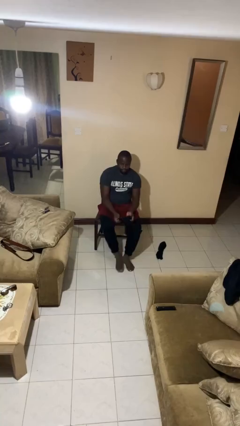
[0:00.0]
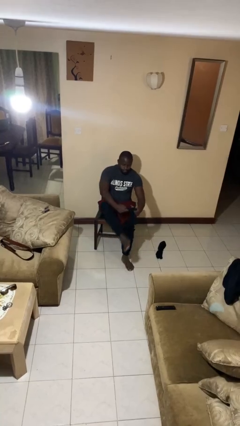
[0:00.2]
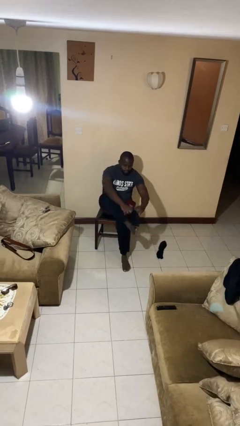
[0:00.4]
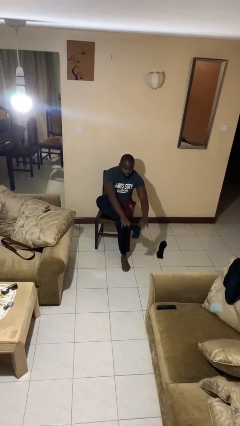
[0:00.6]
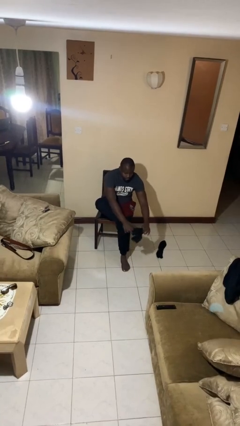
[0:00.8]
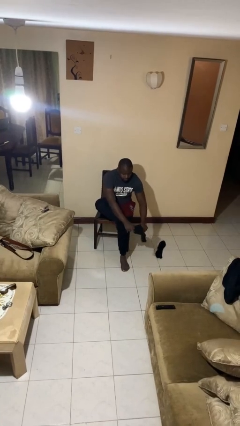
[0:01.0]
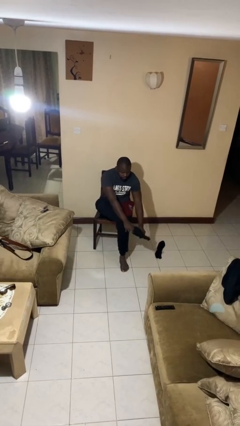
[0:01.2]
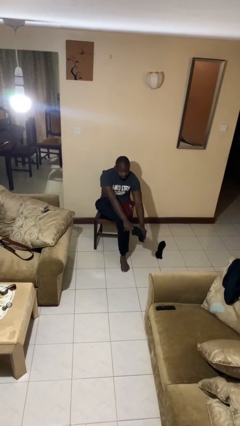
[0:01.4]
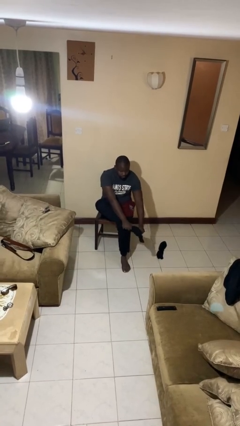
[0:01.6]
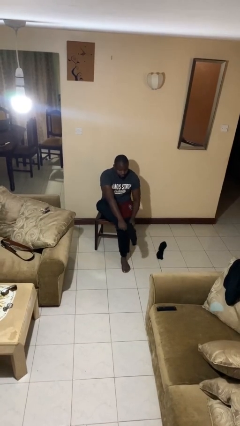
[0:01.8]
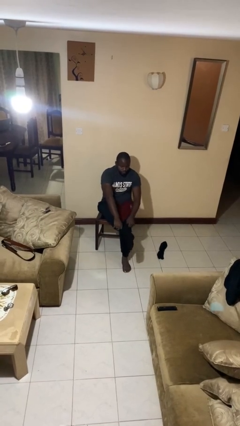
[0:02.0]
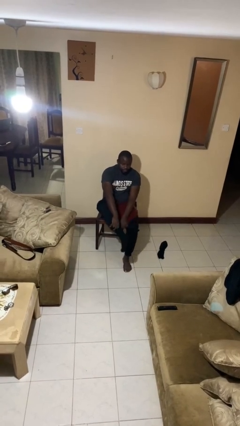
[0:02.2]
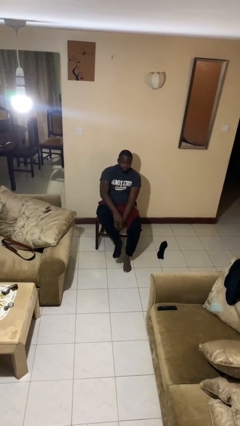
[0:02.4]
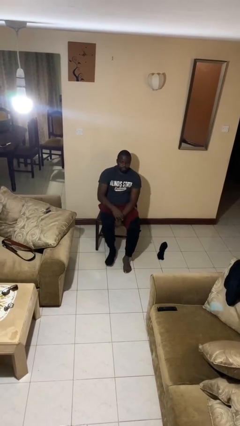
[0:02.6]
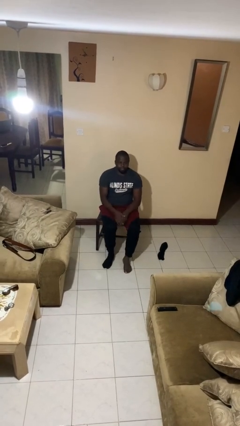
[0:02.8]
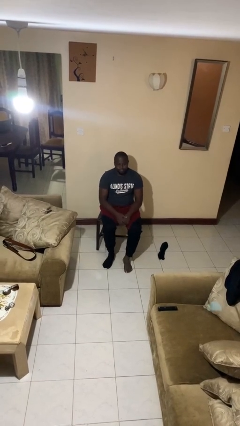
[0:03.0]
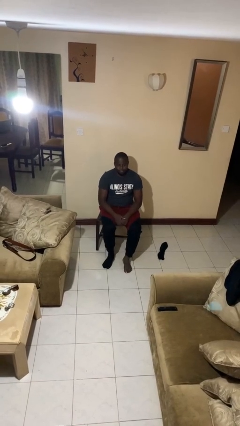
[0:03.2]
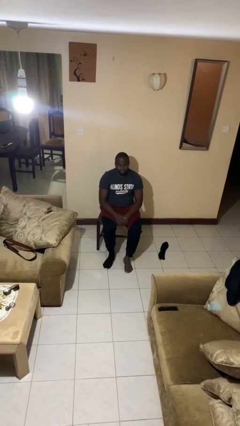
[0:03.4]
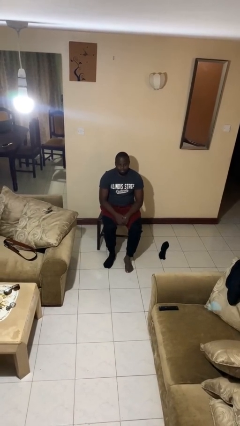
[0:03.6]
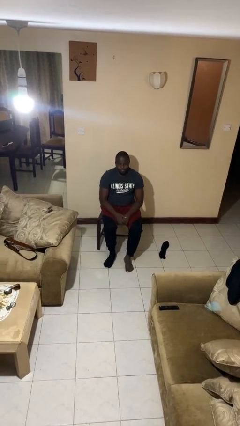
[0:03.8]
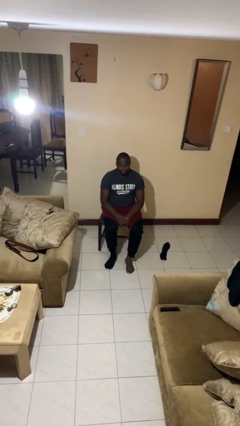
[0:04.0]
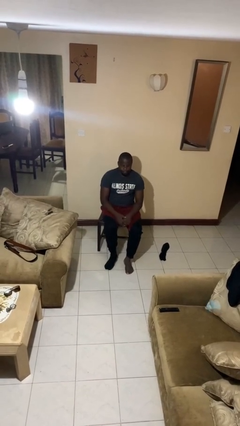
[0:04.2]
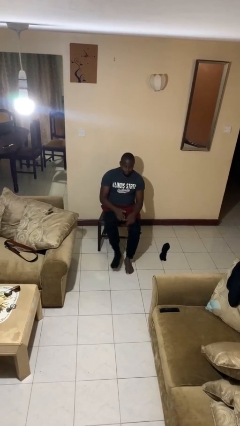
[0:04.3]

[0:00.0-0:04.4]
person puts on socks

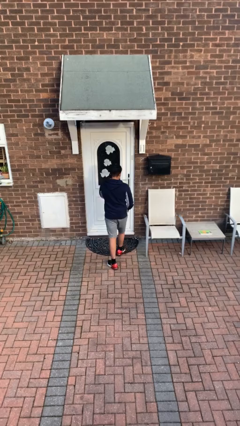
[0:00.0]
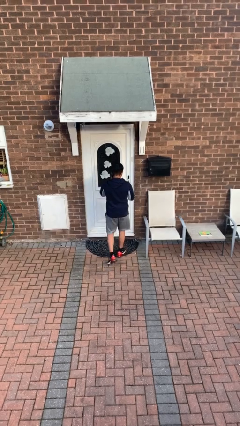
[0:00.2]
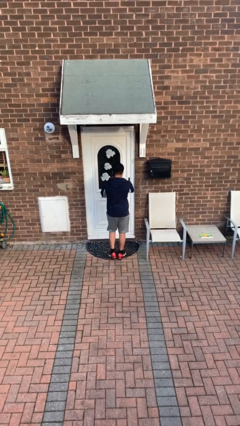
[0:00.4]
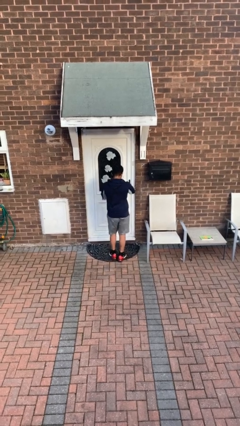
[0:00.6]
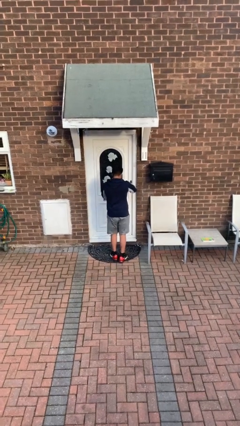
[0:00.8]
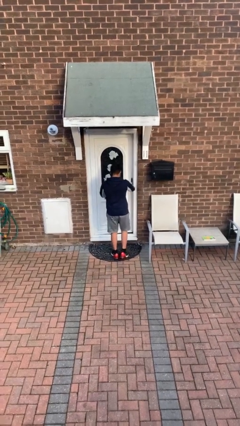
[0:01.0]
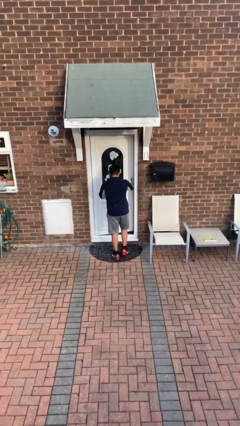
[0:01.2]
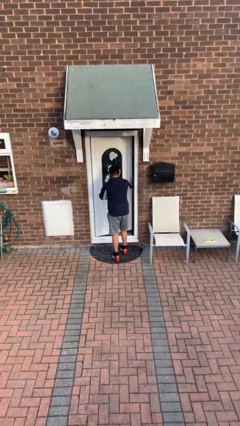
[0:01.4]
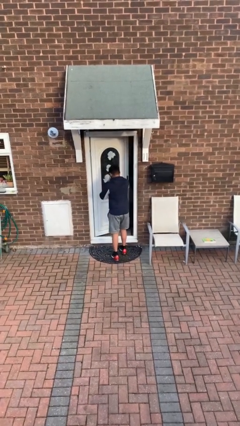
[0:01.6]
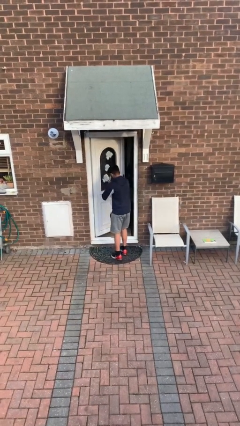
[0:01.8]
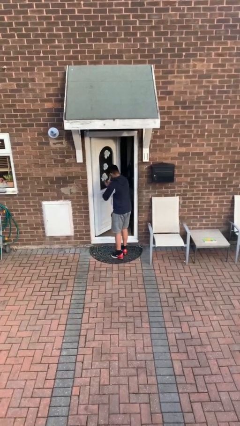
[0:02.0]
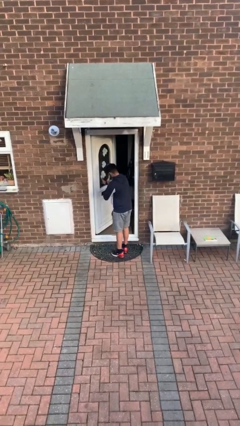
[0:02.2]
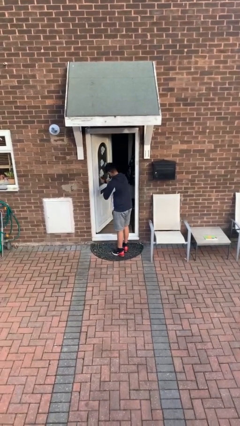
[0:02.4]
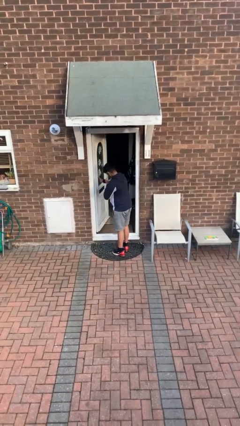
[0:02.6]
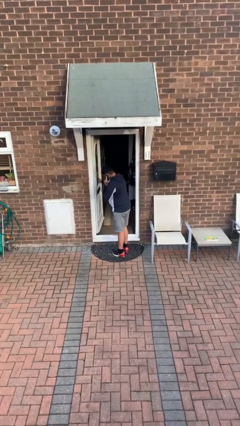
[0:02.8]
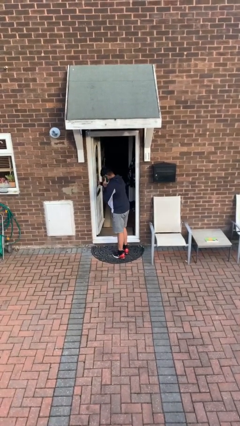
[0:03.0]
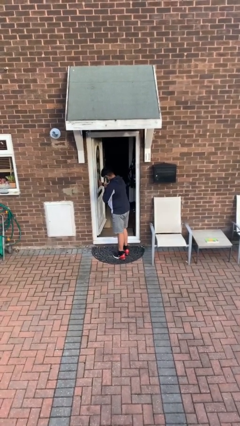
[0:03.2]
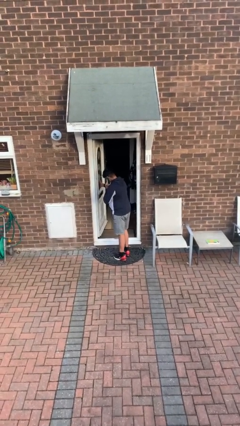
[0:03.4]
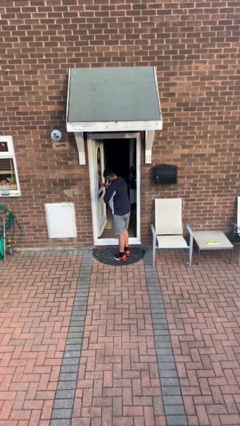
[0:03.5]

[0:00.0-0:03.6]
person opens facility door

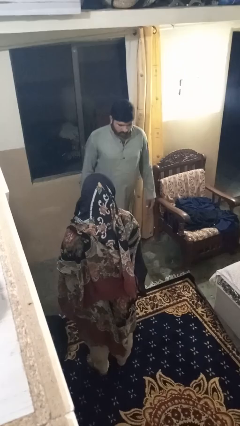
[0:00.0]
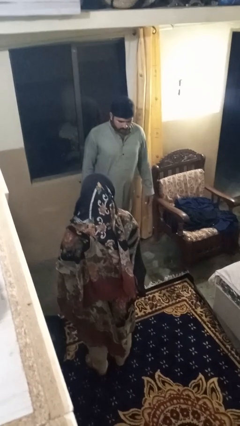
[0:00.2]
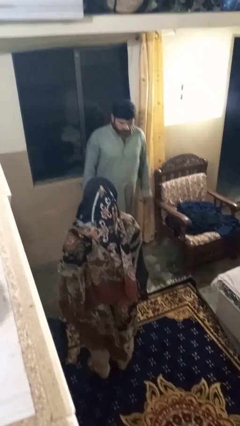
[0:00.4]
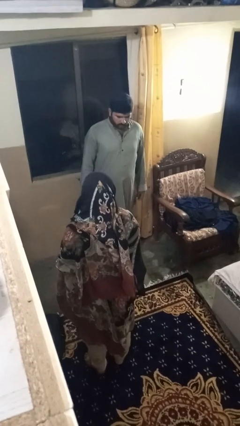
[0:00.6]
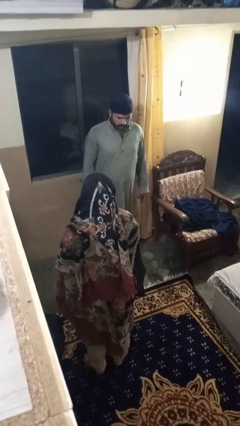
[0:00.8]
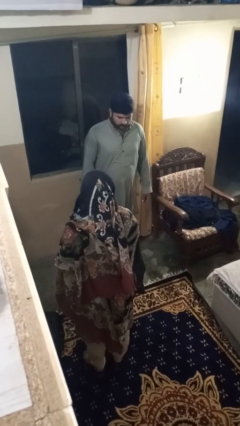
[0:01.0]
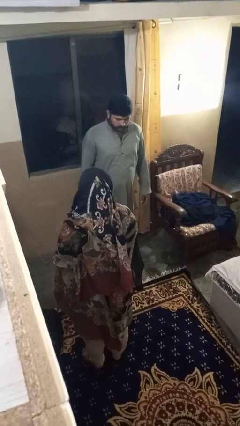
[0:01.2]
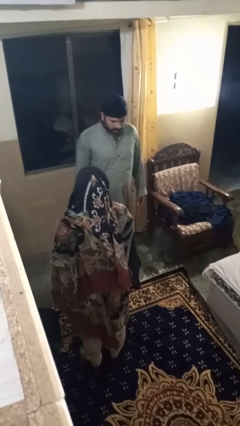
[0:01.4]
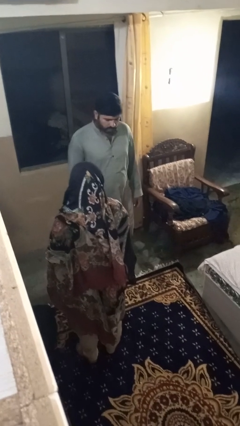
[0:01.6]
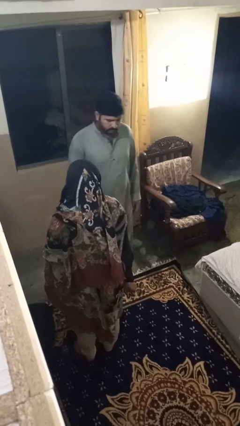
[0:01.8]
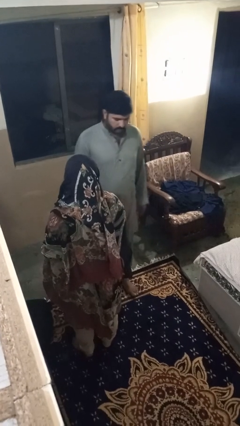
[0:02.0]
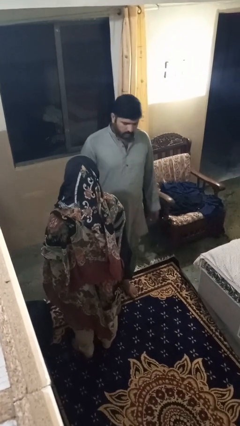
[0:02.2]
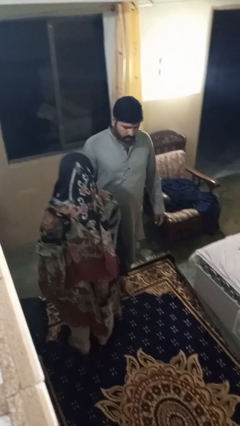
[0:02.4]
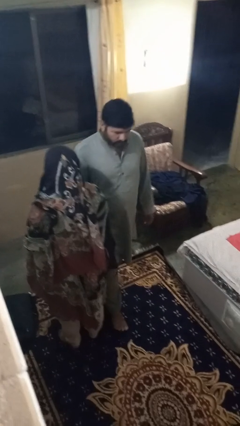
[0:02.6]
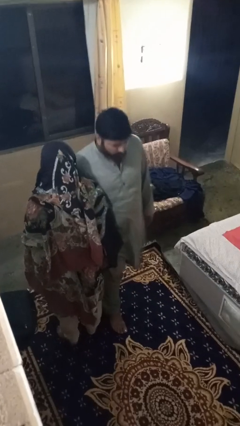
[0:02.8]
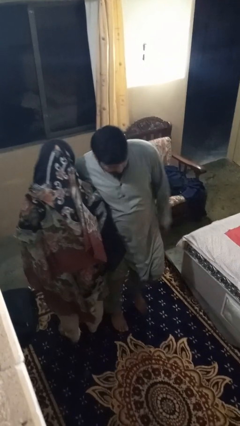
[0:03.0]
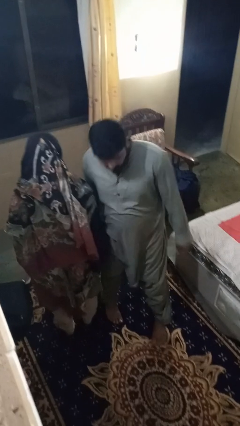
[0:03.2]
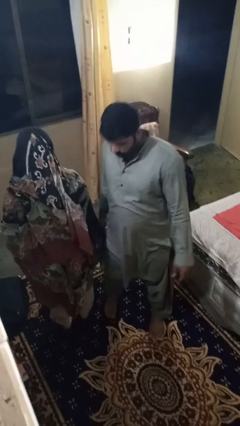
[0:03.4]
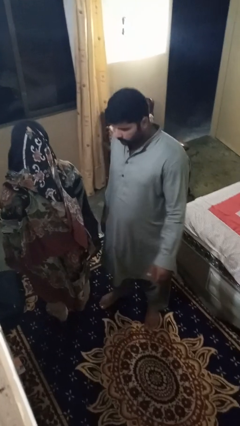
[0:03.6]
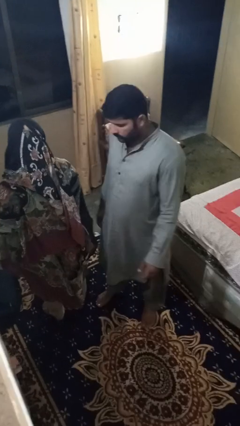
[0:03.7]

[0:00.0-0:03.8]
person bumps into person

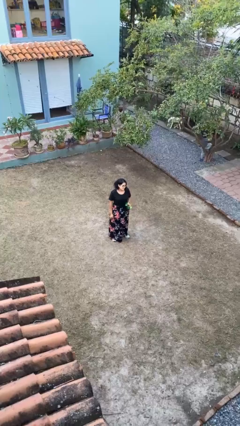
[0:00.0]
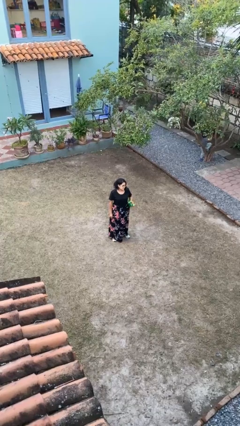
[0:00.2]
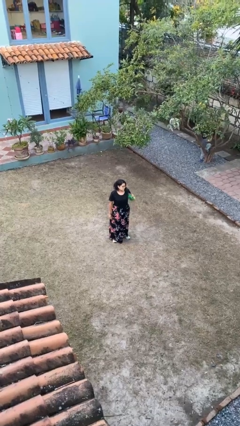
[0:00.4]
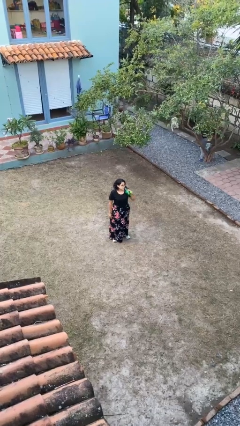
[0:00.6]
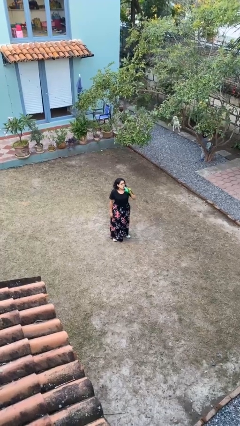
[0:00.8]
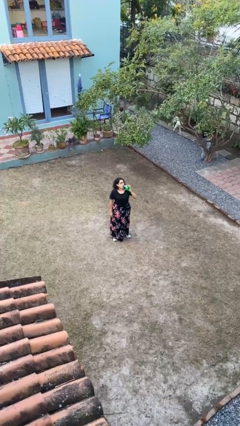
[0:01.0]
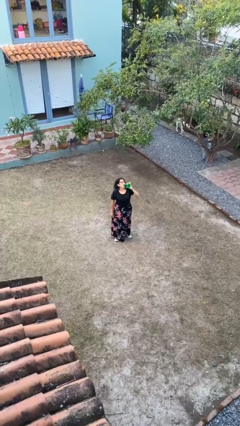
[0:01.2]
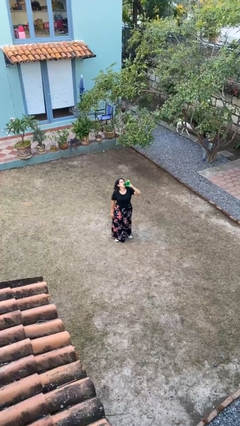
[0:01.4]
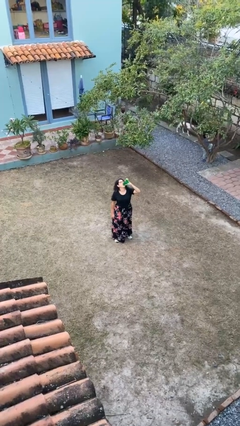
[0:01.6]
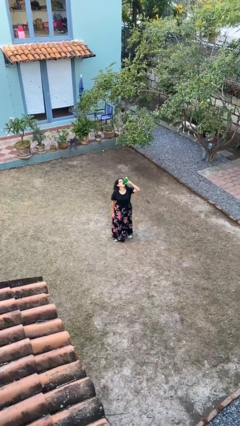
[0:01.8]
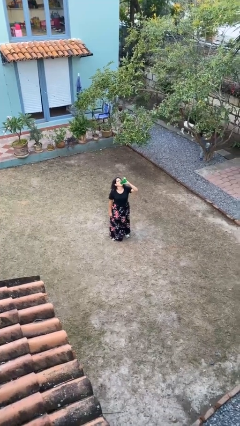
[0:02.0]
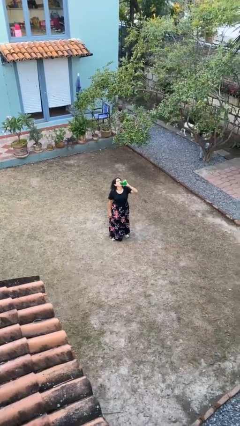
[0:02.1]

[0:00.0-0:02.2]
person drinks from bottle

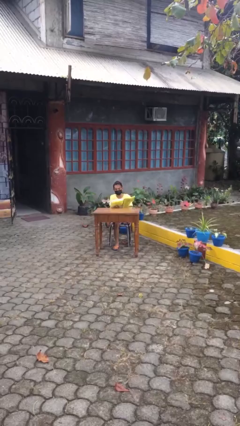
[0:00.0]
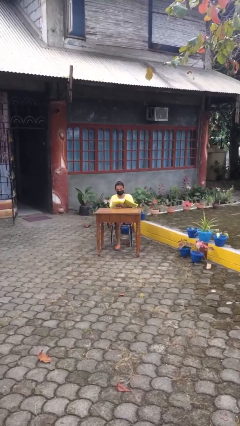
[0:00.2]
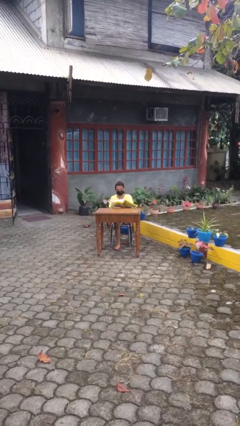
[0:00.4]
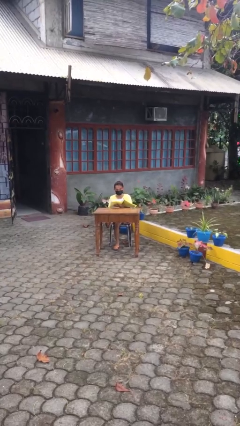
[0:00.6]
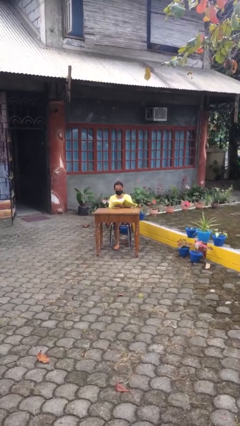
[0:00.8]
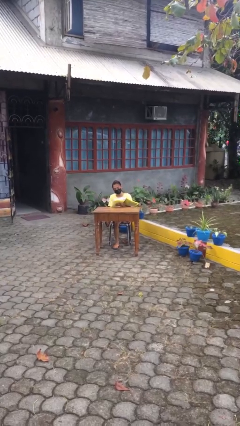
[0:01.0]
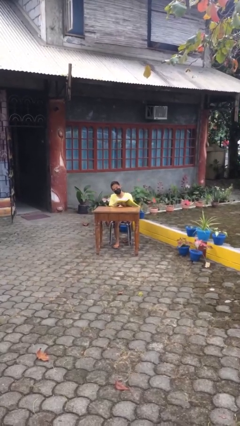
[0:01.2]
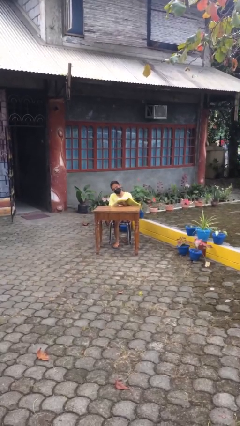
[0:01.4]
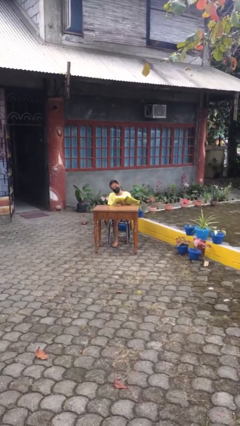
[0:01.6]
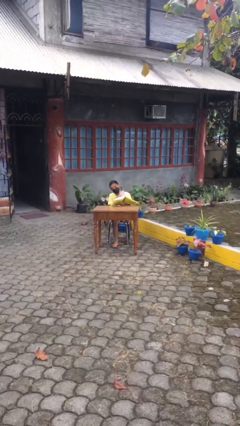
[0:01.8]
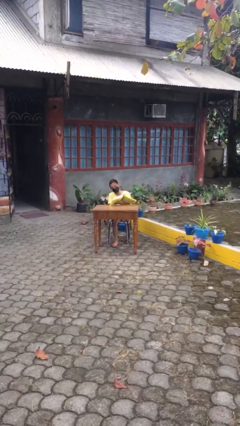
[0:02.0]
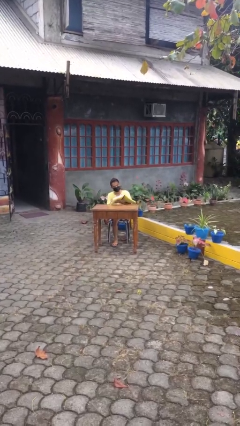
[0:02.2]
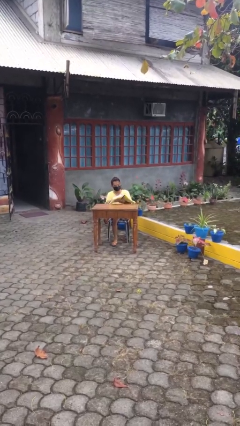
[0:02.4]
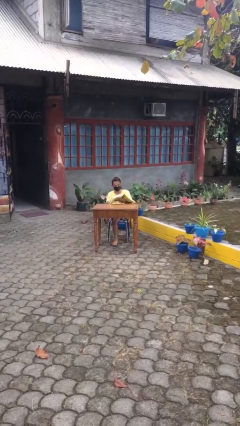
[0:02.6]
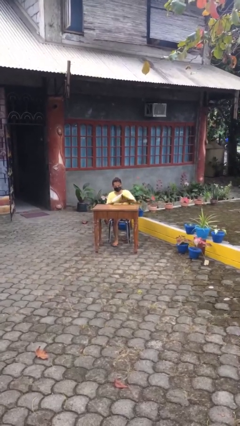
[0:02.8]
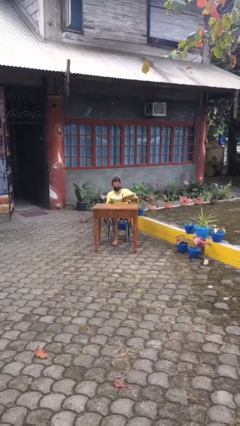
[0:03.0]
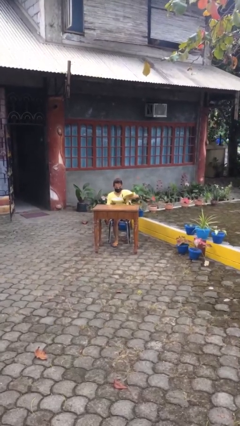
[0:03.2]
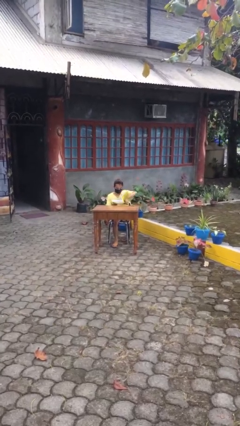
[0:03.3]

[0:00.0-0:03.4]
person reads document
